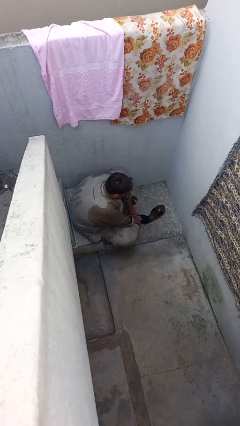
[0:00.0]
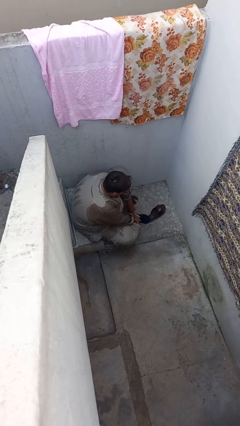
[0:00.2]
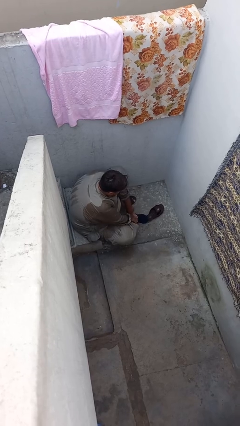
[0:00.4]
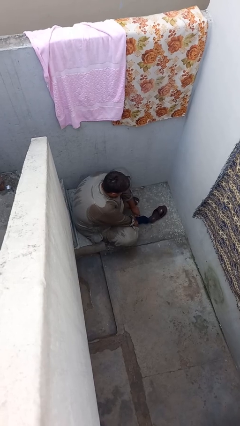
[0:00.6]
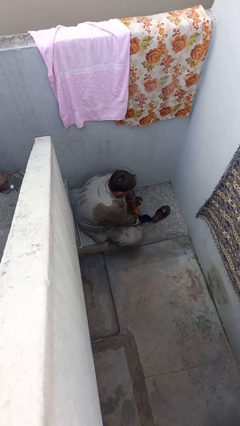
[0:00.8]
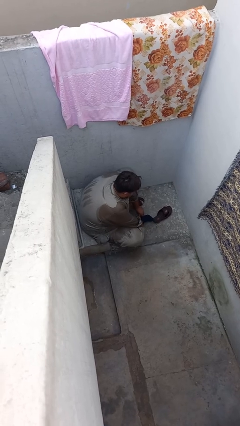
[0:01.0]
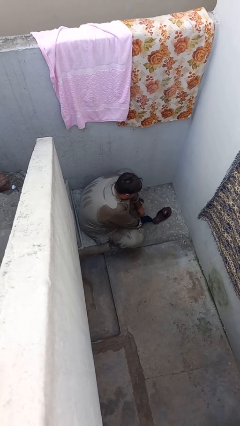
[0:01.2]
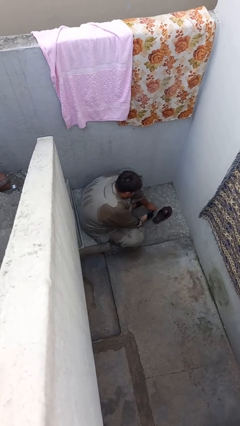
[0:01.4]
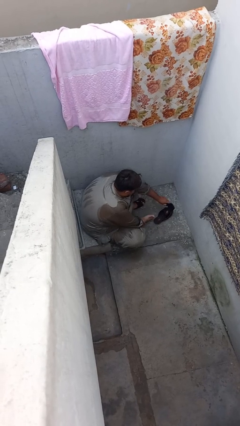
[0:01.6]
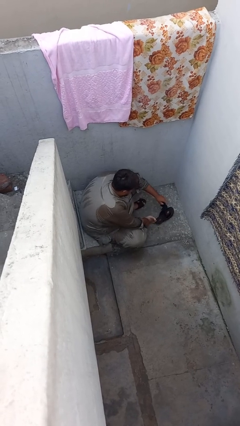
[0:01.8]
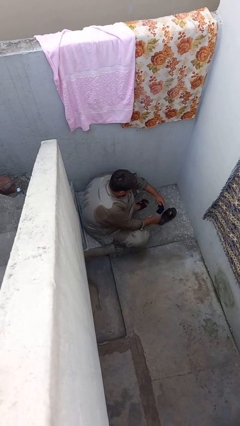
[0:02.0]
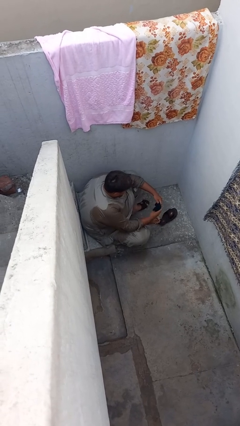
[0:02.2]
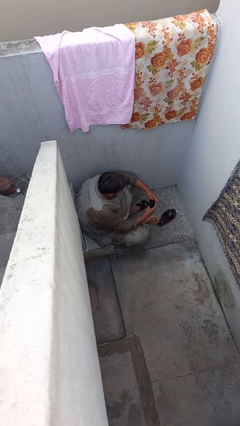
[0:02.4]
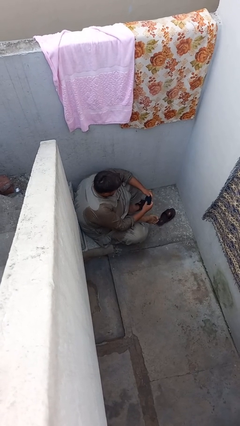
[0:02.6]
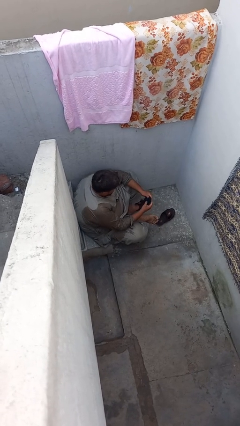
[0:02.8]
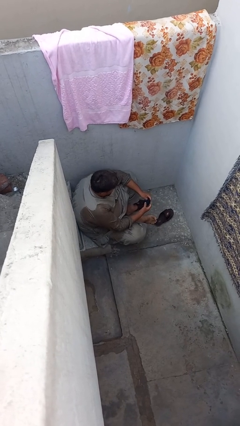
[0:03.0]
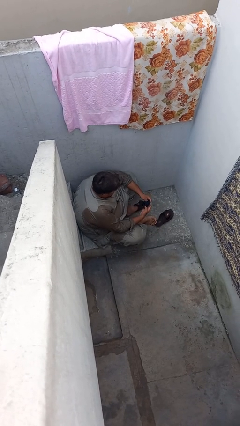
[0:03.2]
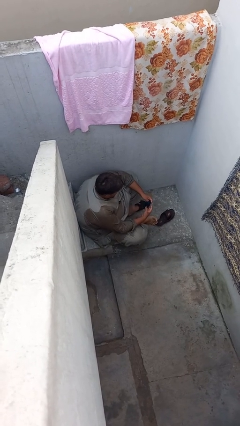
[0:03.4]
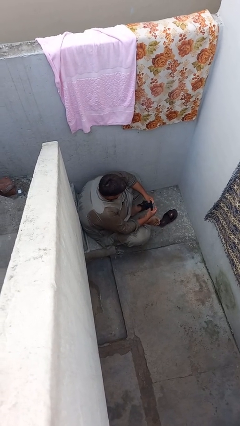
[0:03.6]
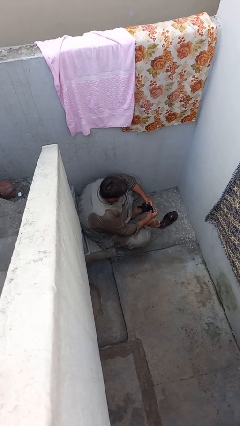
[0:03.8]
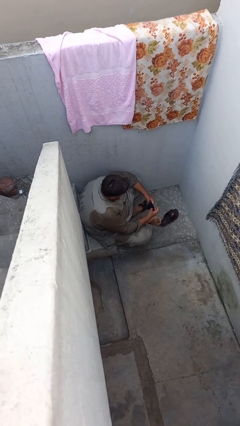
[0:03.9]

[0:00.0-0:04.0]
person takes off socks

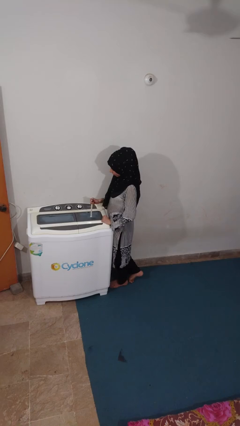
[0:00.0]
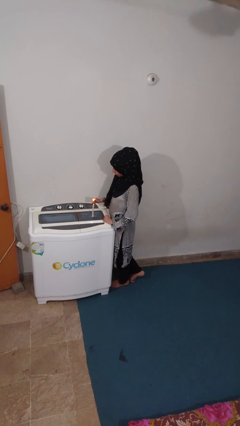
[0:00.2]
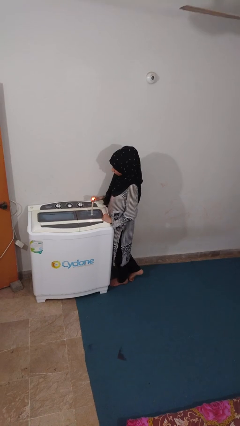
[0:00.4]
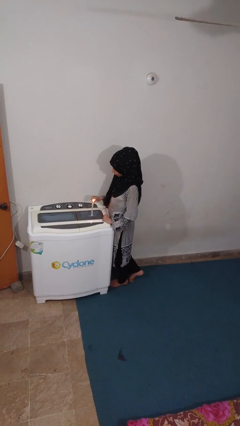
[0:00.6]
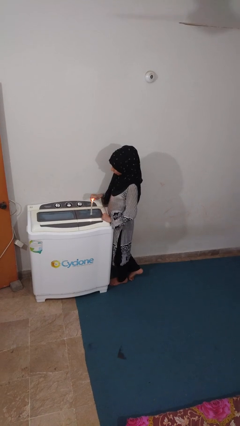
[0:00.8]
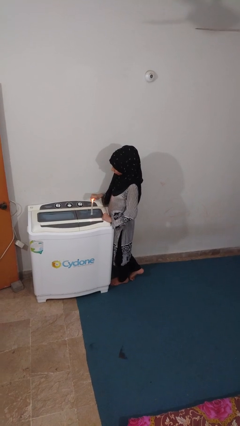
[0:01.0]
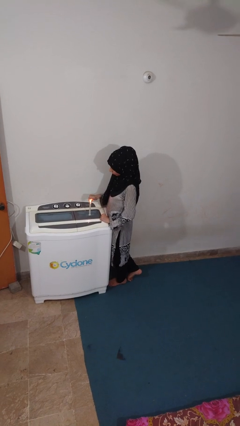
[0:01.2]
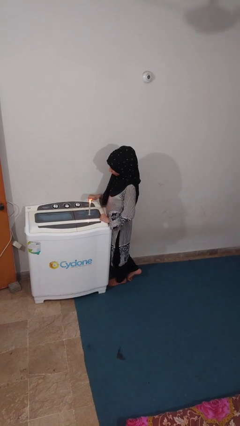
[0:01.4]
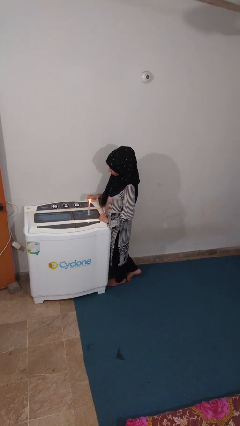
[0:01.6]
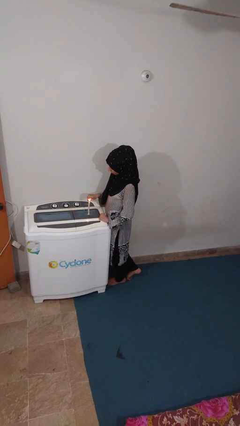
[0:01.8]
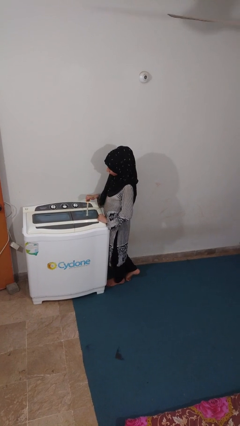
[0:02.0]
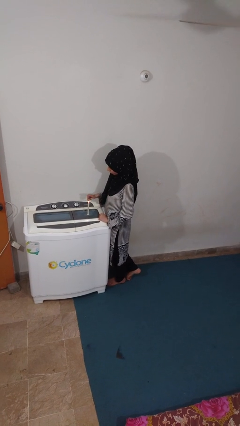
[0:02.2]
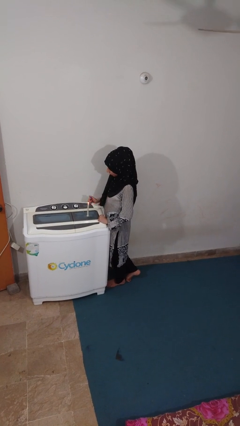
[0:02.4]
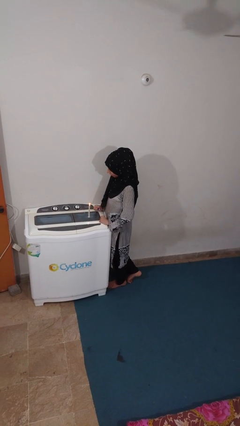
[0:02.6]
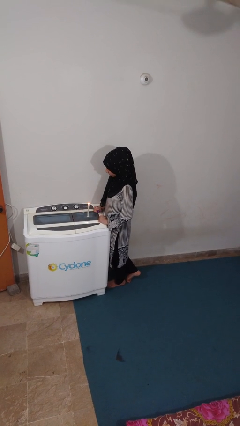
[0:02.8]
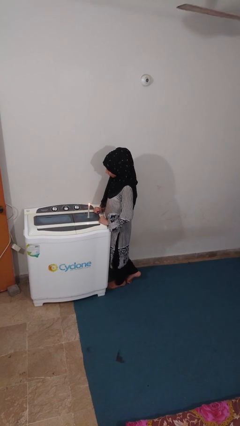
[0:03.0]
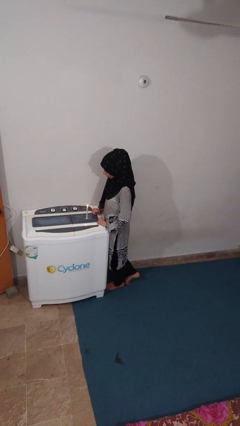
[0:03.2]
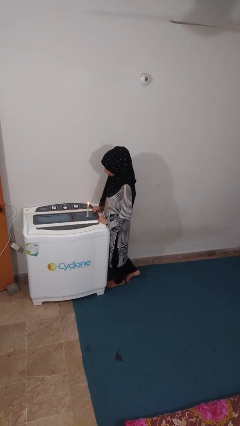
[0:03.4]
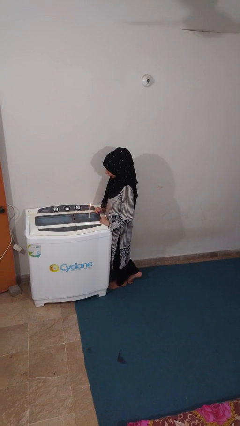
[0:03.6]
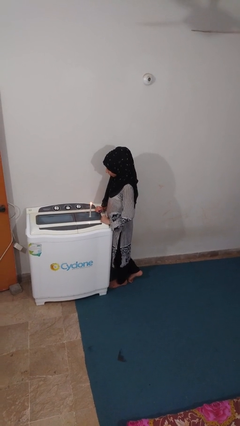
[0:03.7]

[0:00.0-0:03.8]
person lights candle

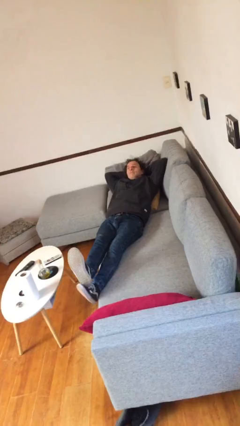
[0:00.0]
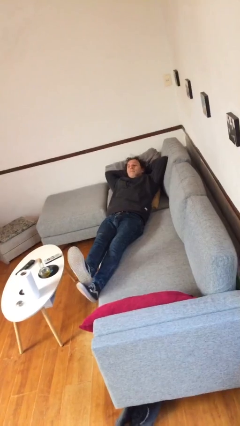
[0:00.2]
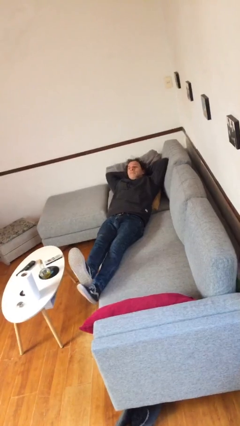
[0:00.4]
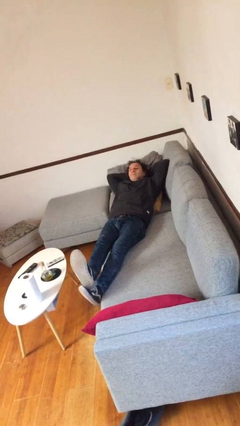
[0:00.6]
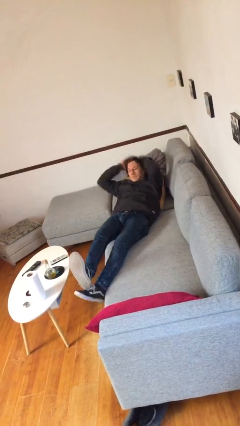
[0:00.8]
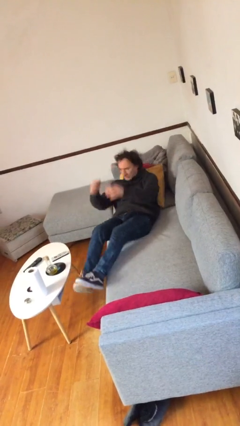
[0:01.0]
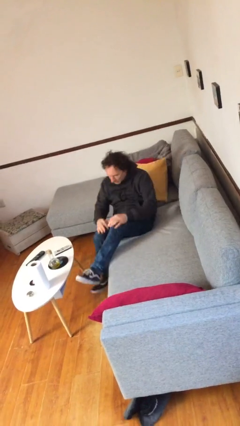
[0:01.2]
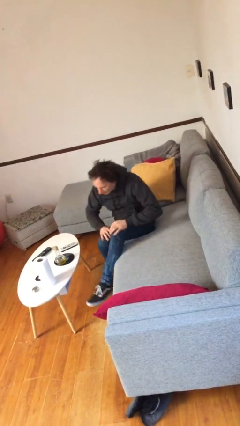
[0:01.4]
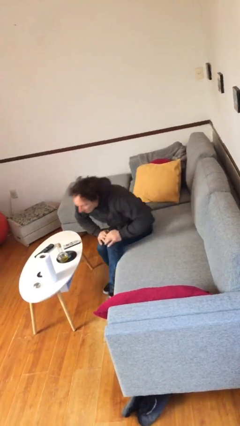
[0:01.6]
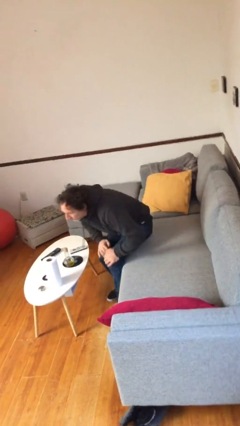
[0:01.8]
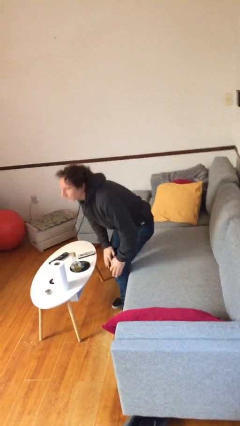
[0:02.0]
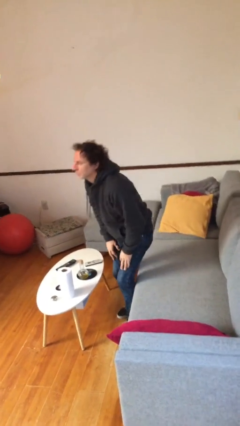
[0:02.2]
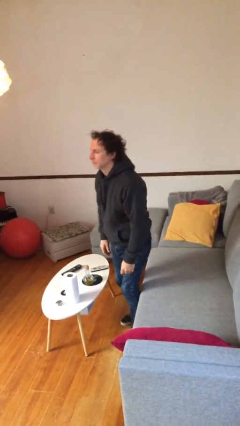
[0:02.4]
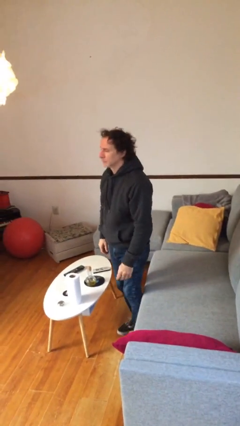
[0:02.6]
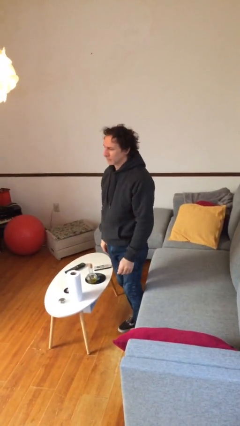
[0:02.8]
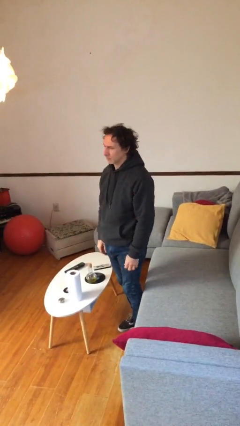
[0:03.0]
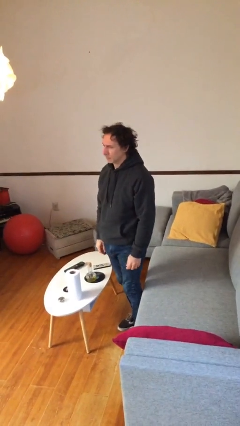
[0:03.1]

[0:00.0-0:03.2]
person stands up

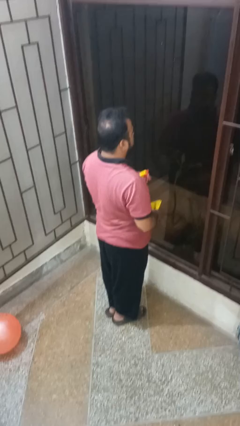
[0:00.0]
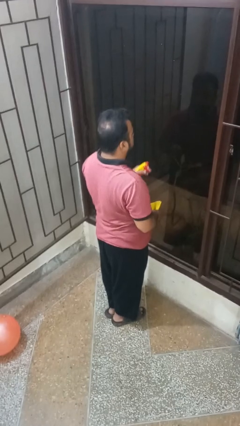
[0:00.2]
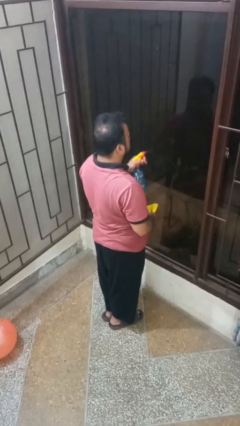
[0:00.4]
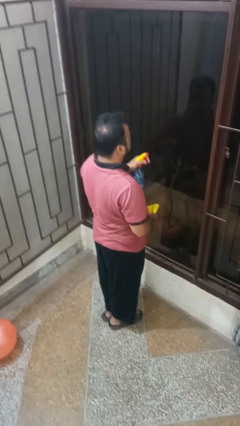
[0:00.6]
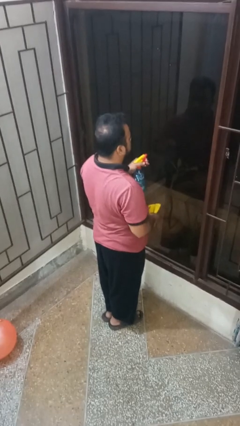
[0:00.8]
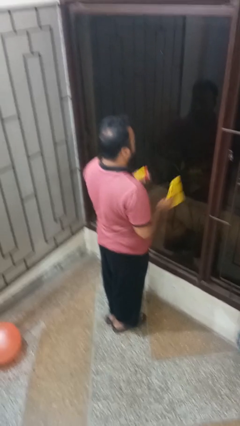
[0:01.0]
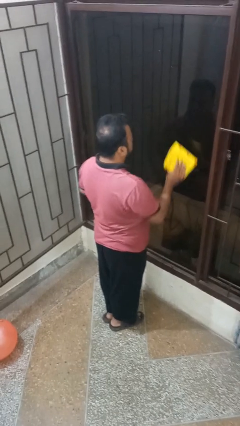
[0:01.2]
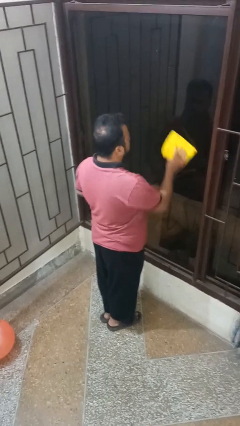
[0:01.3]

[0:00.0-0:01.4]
person sprays from bottle

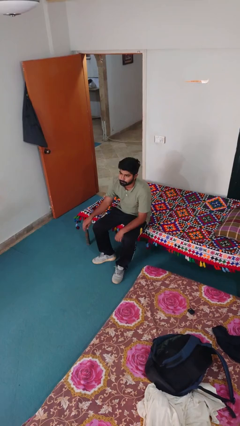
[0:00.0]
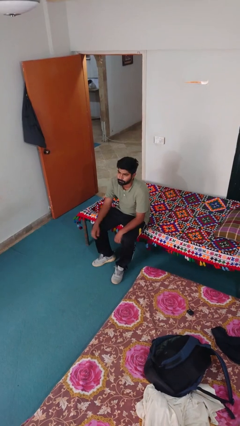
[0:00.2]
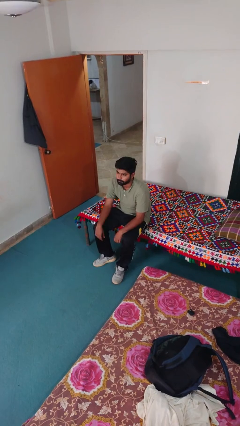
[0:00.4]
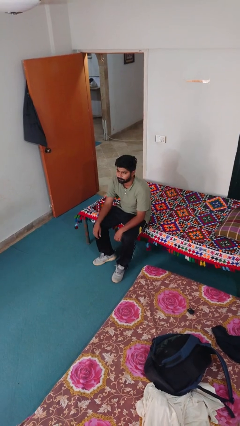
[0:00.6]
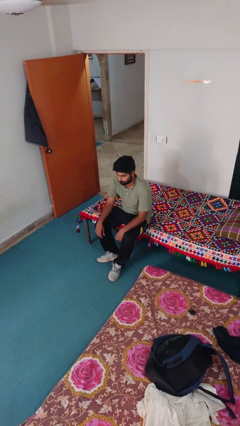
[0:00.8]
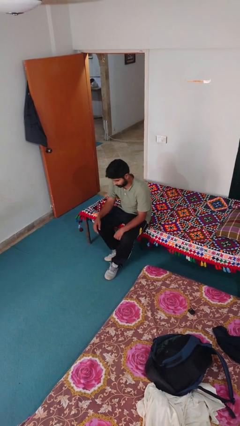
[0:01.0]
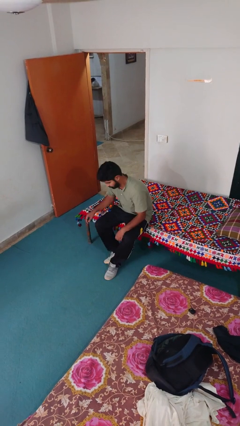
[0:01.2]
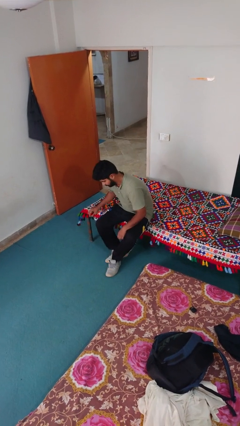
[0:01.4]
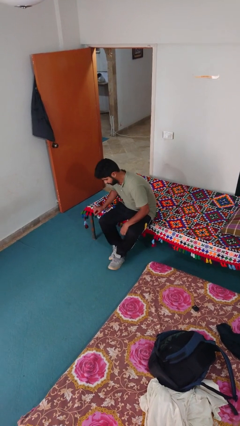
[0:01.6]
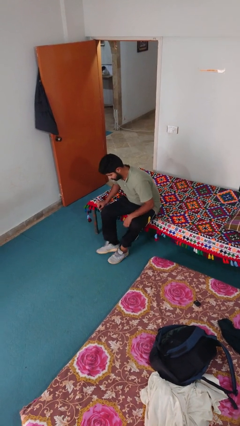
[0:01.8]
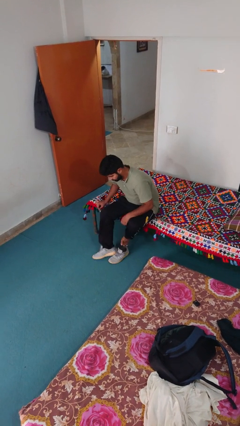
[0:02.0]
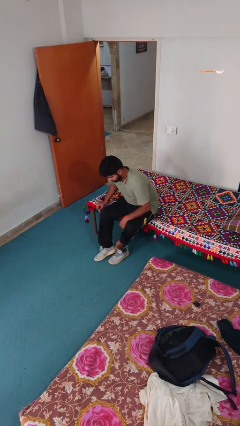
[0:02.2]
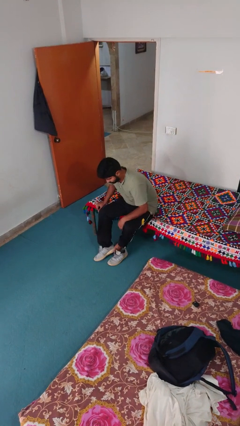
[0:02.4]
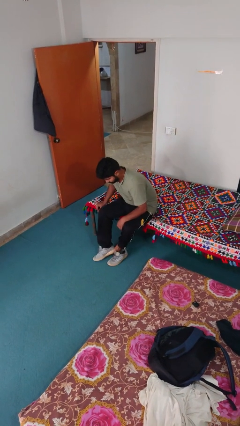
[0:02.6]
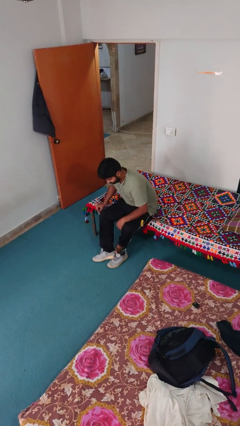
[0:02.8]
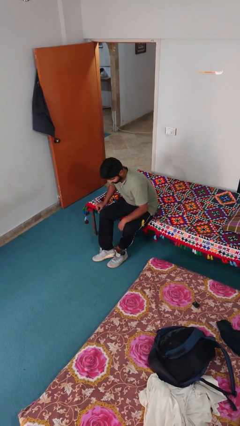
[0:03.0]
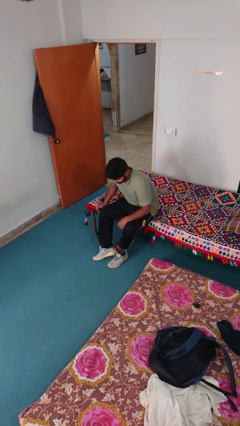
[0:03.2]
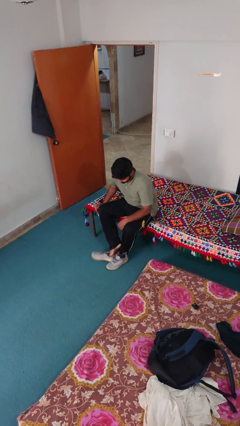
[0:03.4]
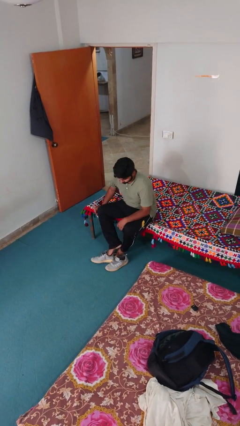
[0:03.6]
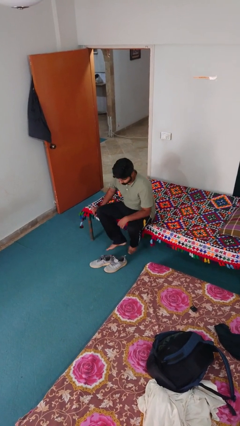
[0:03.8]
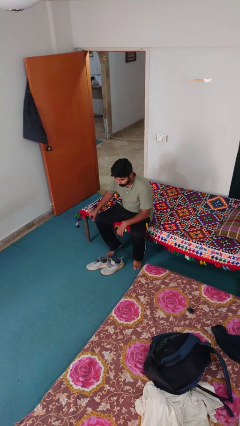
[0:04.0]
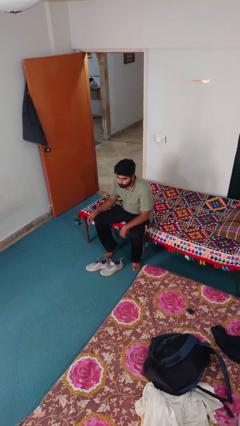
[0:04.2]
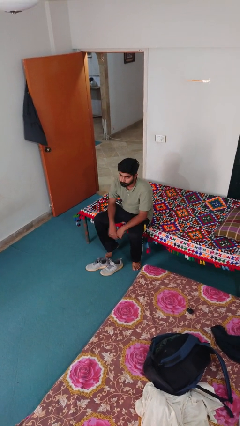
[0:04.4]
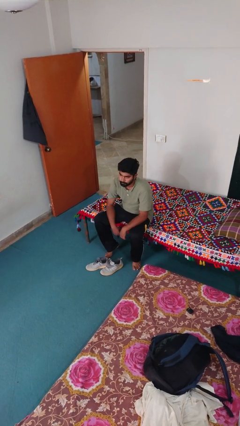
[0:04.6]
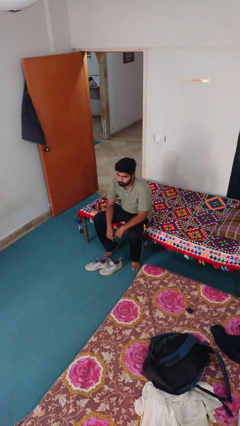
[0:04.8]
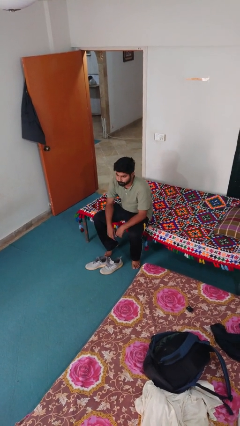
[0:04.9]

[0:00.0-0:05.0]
person takes off shoes

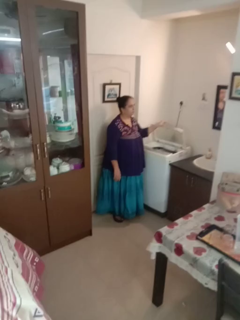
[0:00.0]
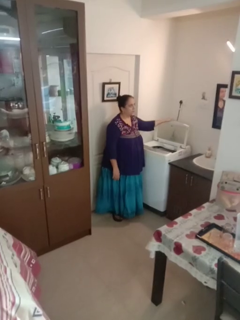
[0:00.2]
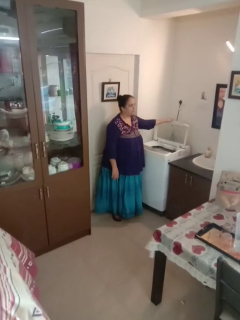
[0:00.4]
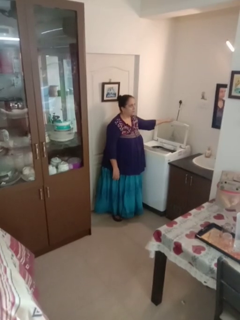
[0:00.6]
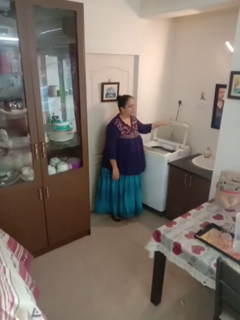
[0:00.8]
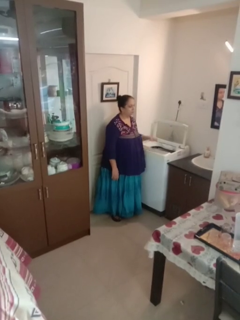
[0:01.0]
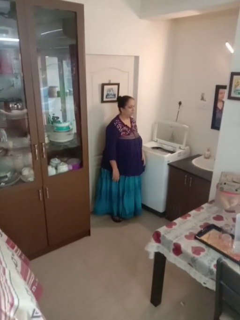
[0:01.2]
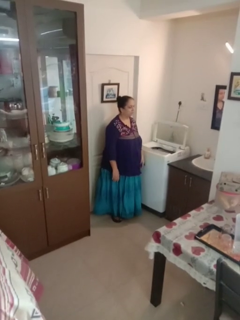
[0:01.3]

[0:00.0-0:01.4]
person opens clothes washer
